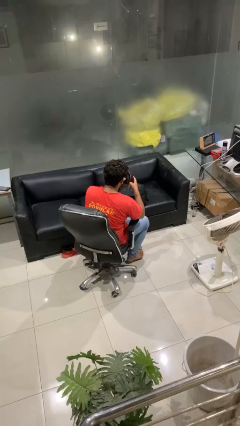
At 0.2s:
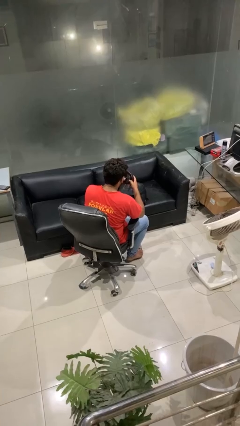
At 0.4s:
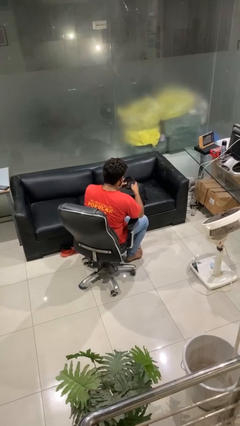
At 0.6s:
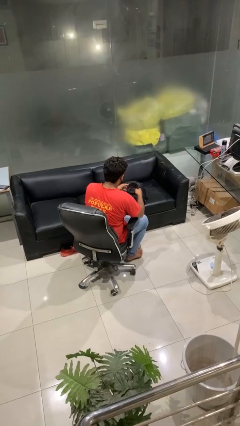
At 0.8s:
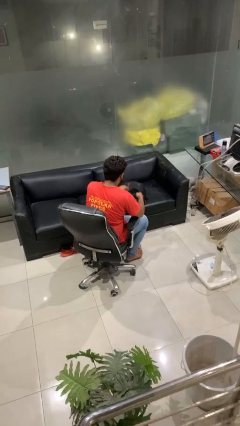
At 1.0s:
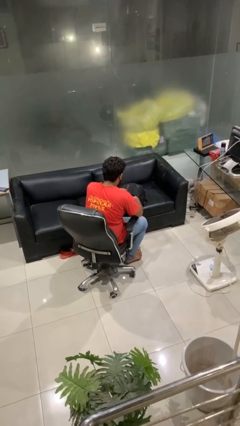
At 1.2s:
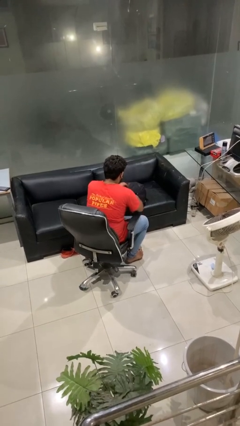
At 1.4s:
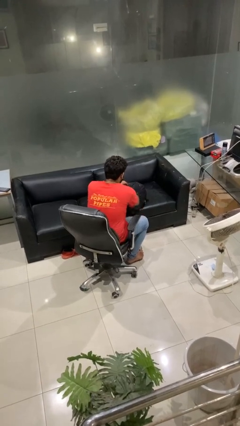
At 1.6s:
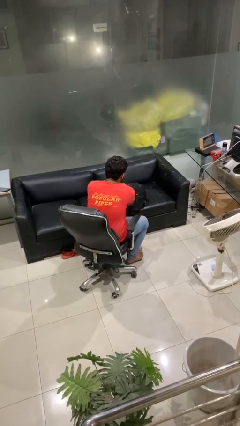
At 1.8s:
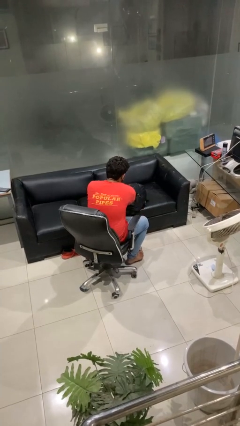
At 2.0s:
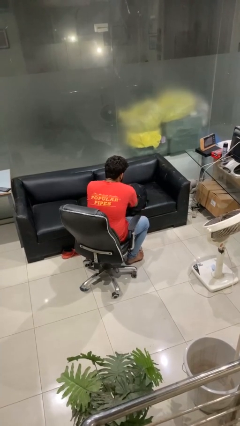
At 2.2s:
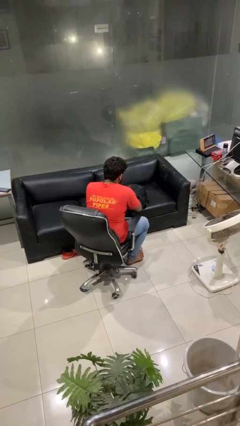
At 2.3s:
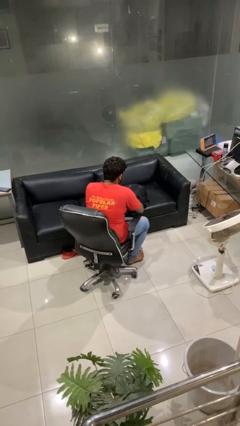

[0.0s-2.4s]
person puts object into backpack

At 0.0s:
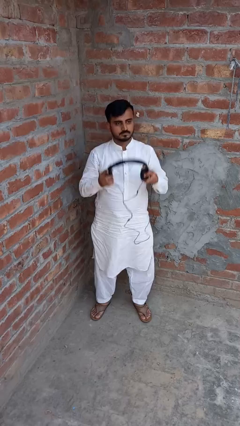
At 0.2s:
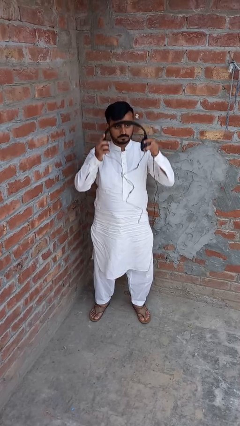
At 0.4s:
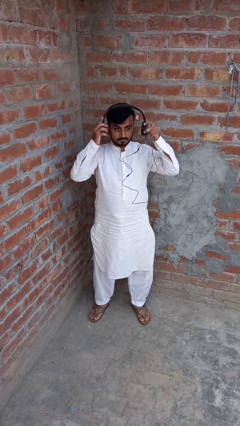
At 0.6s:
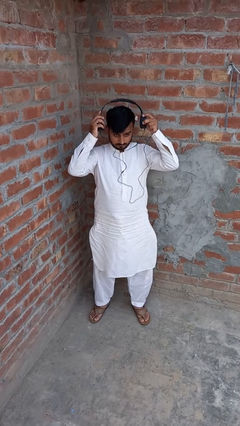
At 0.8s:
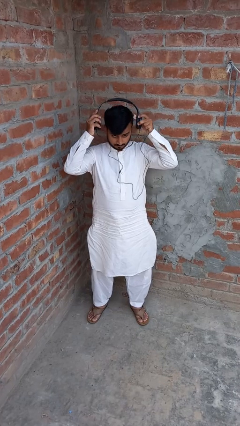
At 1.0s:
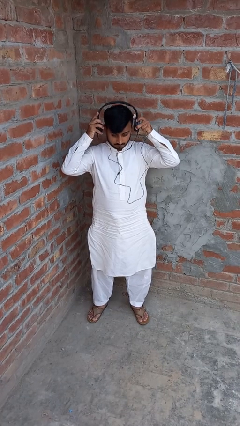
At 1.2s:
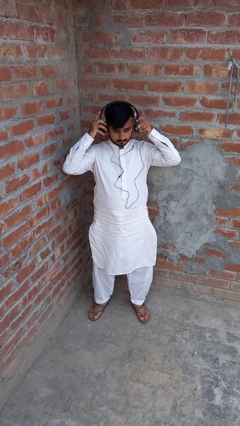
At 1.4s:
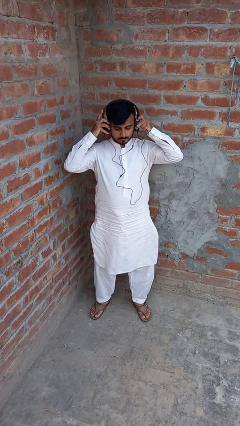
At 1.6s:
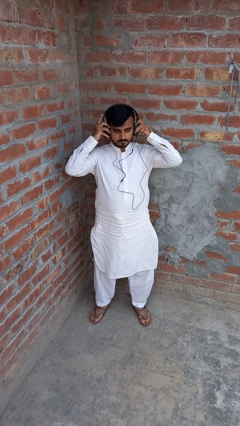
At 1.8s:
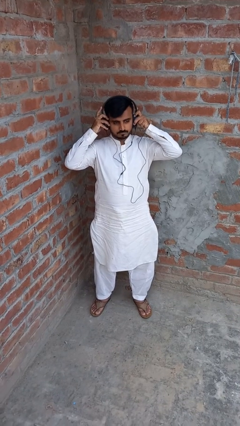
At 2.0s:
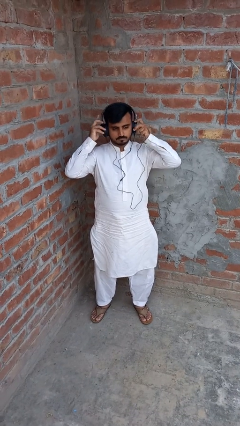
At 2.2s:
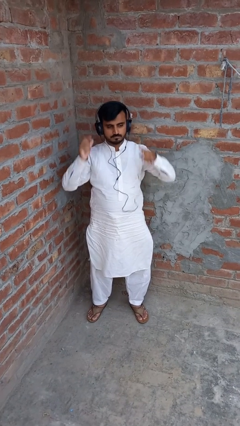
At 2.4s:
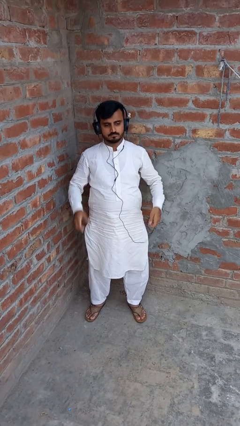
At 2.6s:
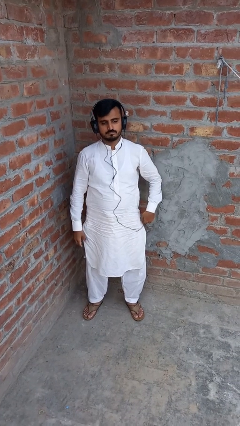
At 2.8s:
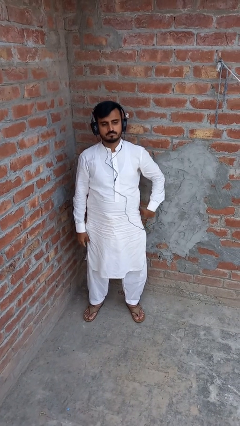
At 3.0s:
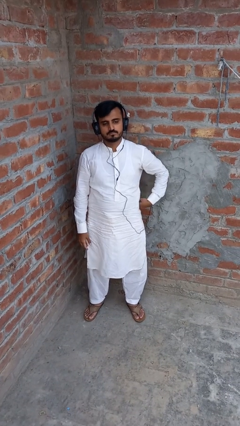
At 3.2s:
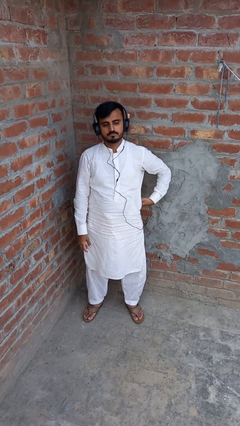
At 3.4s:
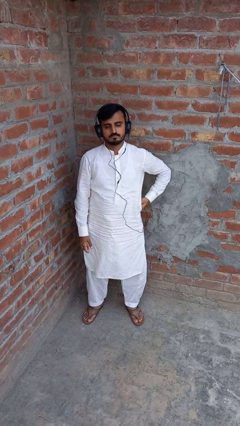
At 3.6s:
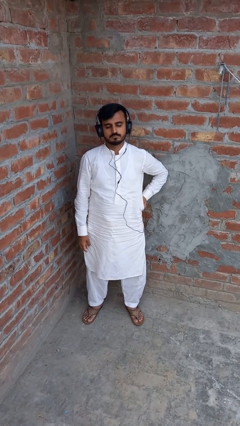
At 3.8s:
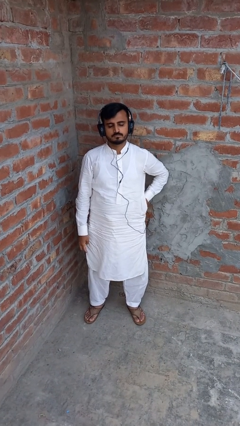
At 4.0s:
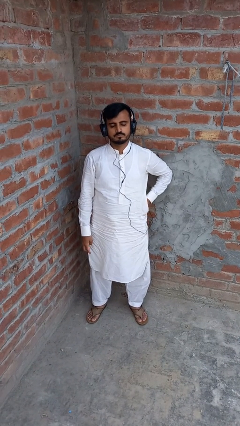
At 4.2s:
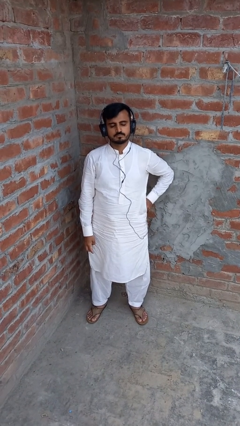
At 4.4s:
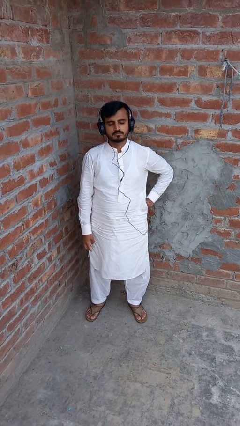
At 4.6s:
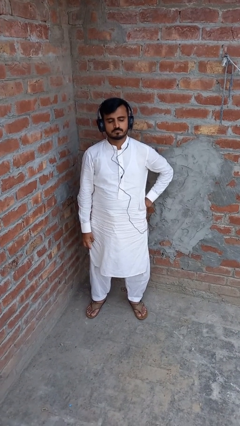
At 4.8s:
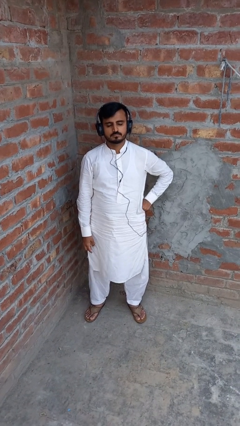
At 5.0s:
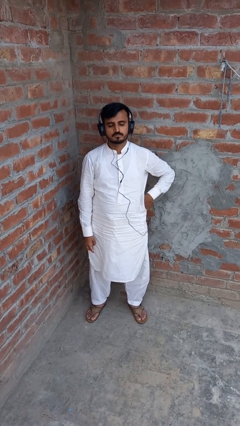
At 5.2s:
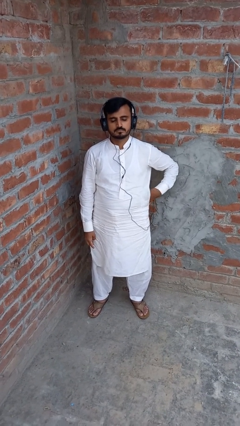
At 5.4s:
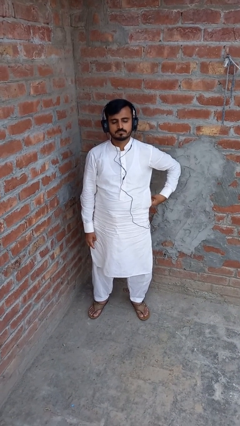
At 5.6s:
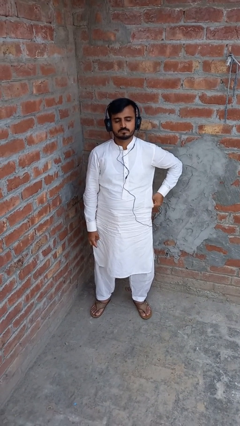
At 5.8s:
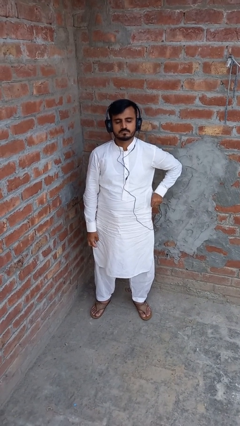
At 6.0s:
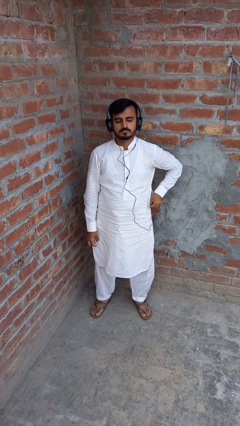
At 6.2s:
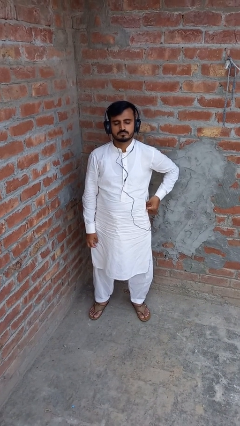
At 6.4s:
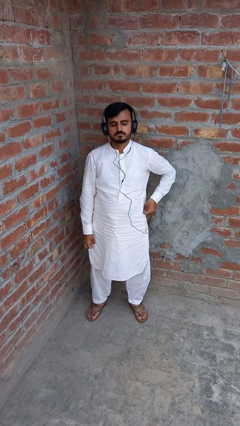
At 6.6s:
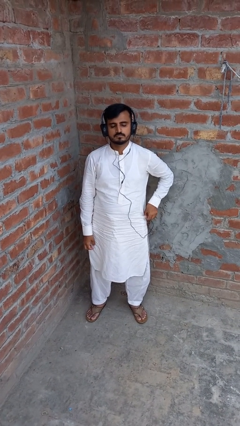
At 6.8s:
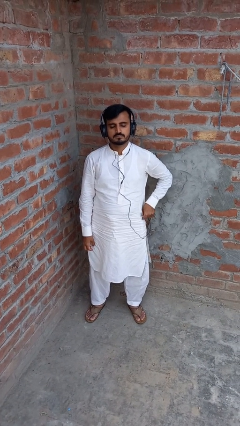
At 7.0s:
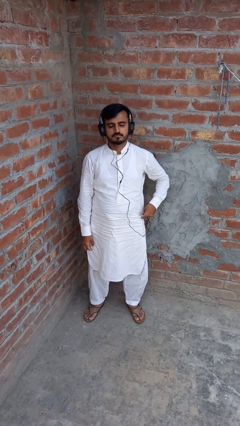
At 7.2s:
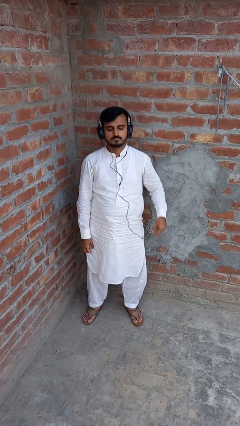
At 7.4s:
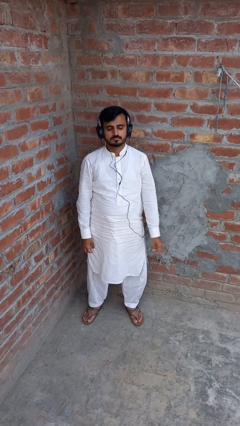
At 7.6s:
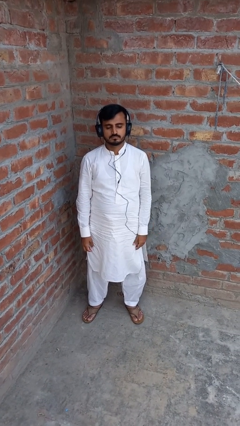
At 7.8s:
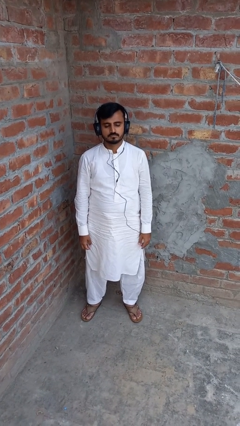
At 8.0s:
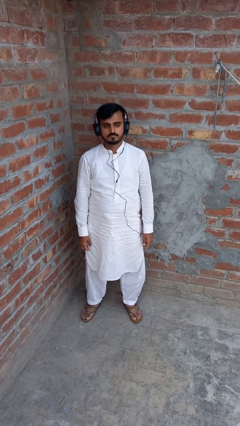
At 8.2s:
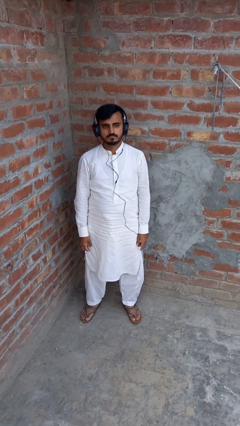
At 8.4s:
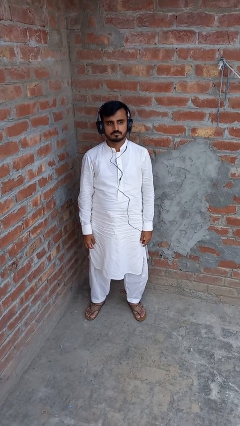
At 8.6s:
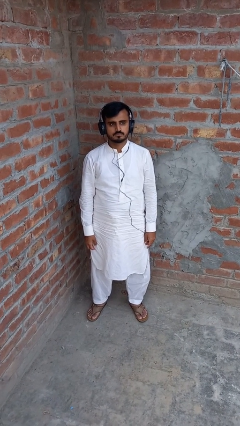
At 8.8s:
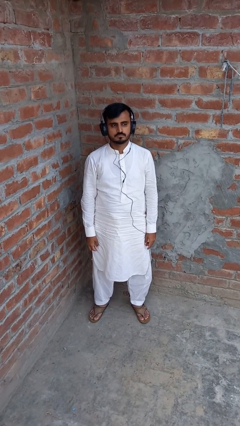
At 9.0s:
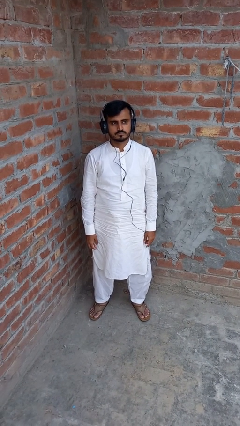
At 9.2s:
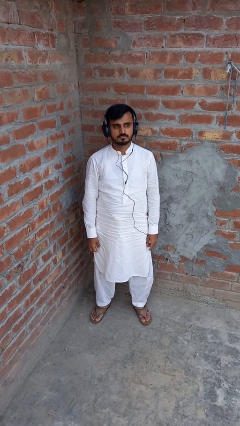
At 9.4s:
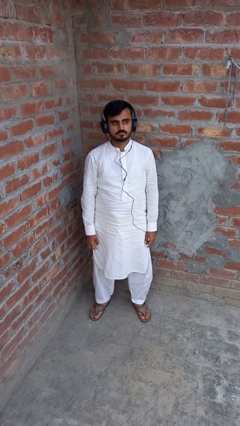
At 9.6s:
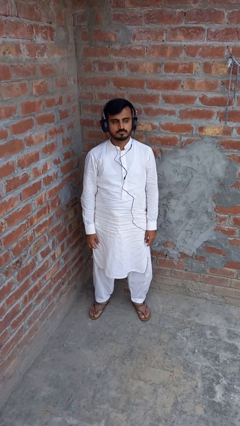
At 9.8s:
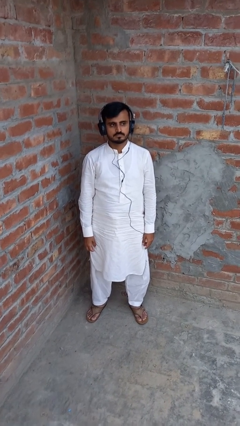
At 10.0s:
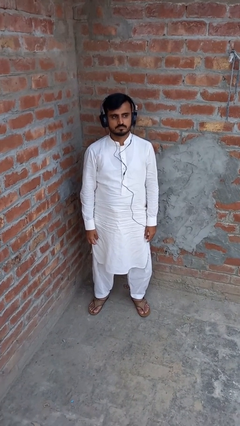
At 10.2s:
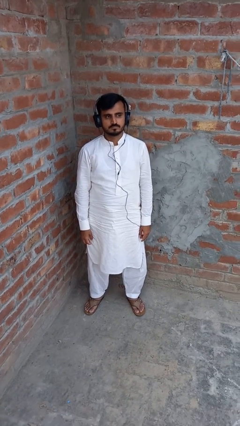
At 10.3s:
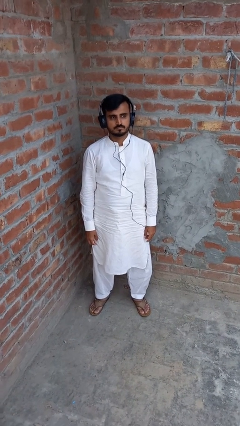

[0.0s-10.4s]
person puts on headphones

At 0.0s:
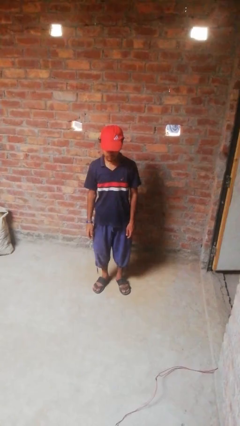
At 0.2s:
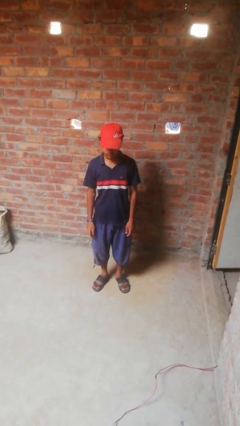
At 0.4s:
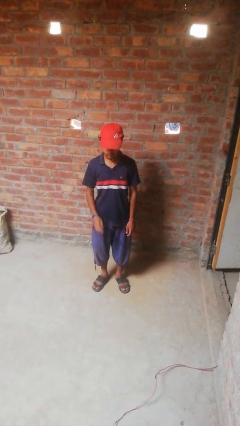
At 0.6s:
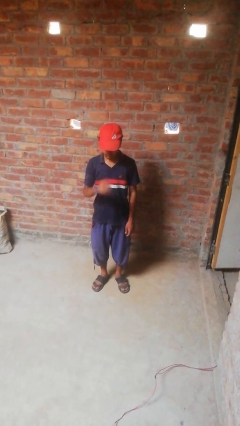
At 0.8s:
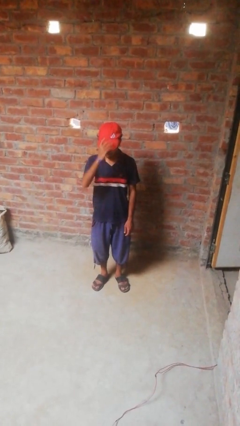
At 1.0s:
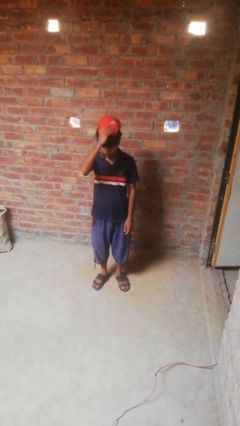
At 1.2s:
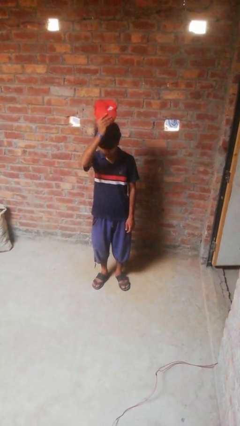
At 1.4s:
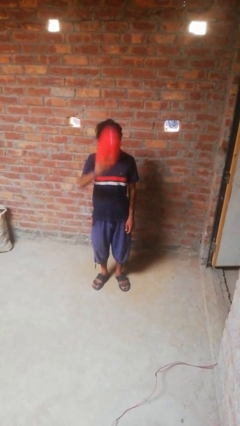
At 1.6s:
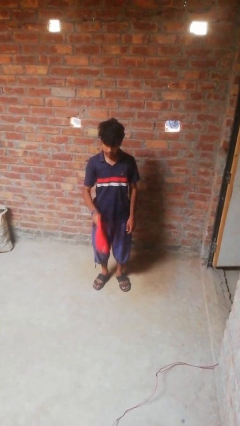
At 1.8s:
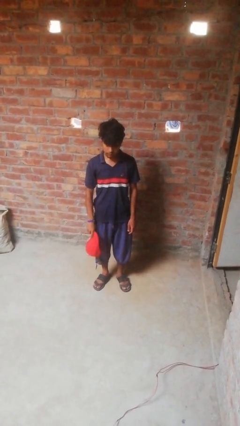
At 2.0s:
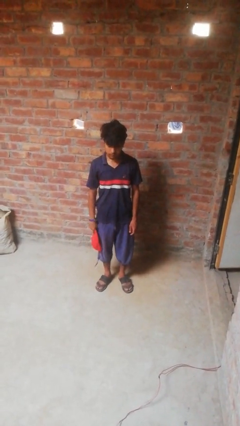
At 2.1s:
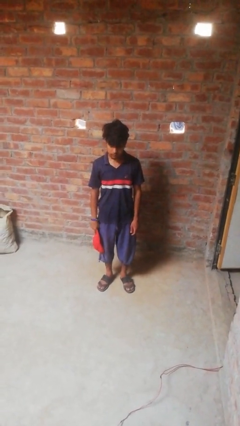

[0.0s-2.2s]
person takes off hat

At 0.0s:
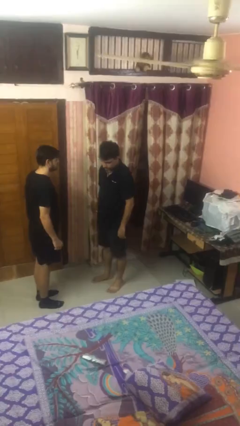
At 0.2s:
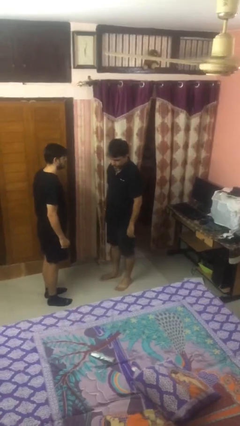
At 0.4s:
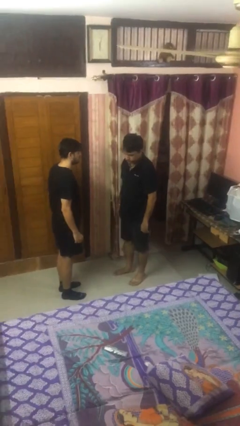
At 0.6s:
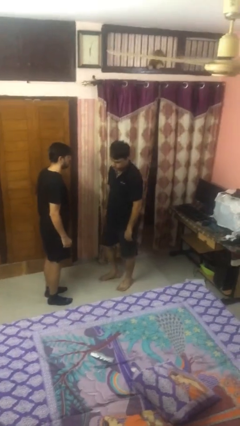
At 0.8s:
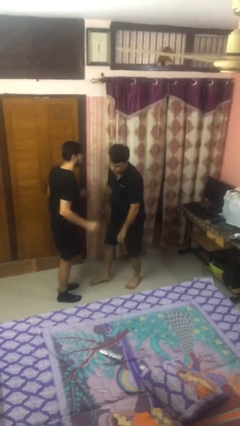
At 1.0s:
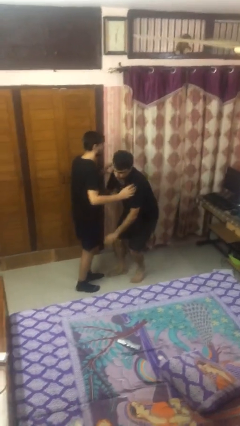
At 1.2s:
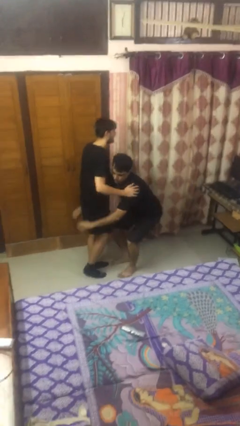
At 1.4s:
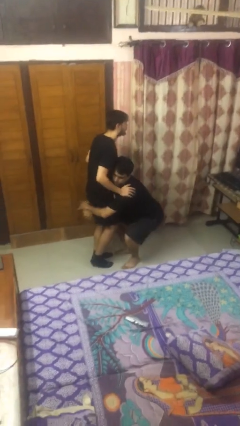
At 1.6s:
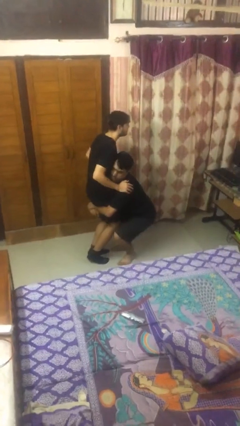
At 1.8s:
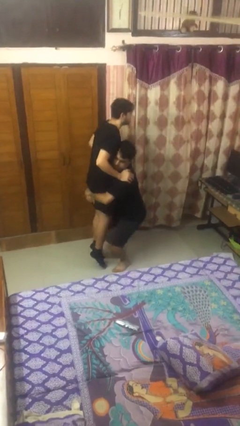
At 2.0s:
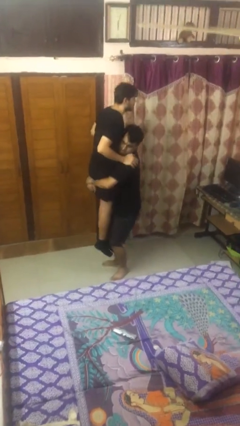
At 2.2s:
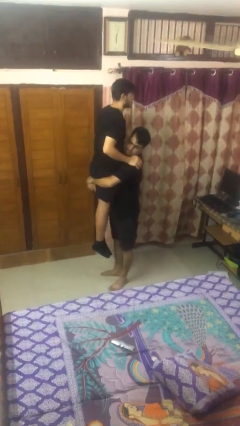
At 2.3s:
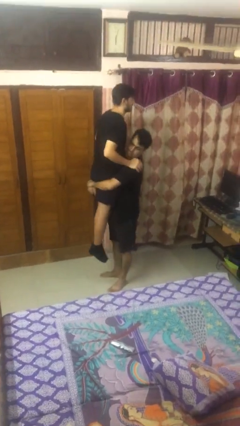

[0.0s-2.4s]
person picks up person

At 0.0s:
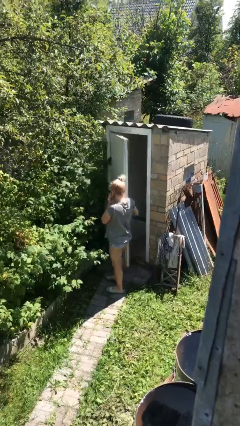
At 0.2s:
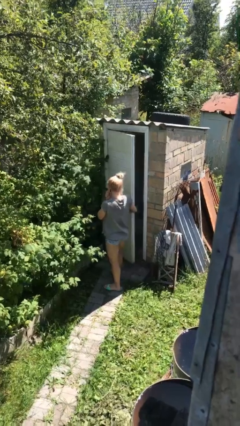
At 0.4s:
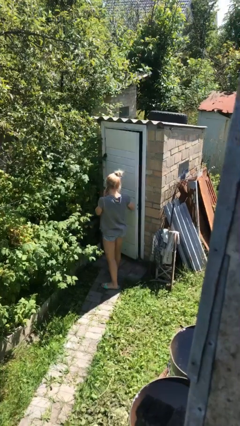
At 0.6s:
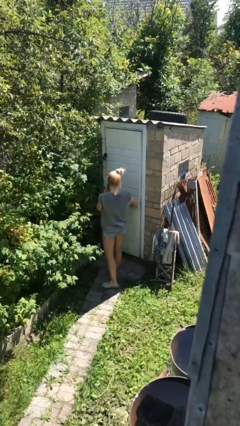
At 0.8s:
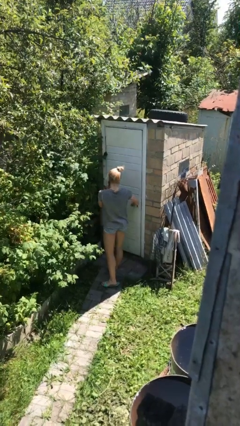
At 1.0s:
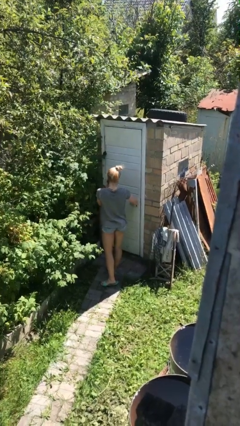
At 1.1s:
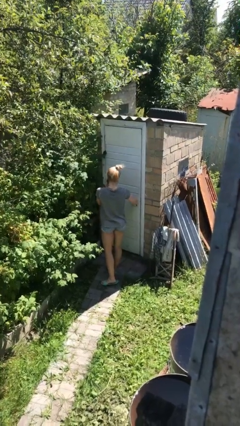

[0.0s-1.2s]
person closes facility door
